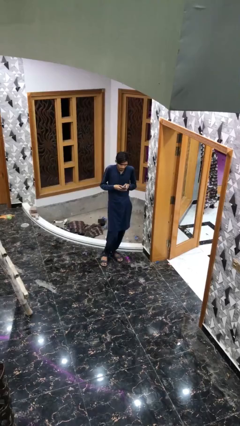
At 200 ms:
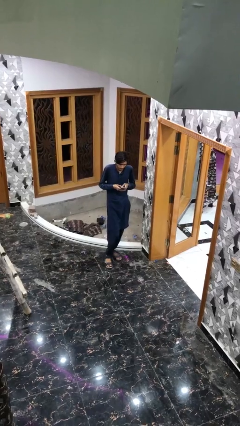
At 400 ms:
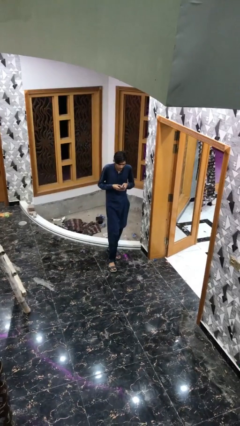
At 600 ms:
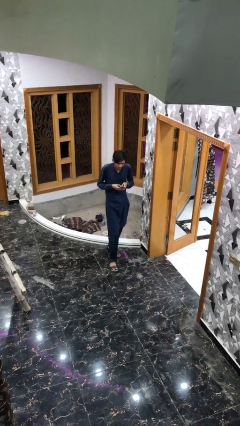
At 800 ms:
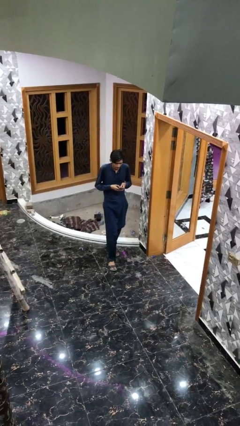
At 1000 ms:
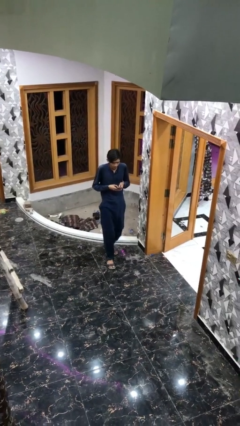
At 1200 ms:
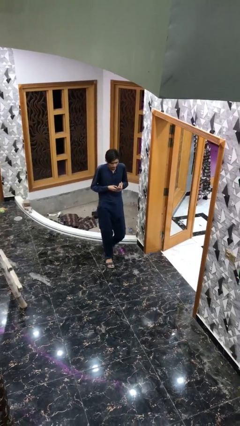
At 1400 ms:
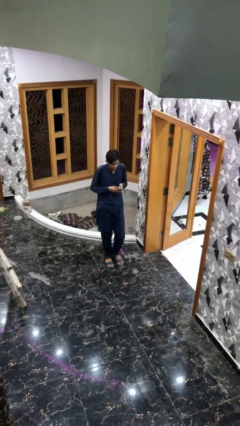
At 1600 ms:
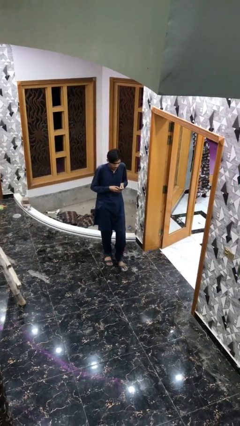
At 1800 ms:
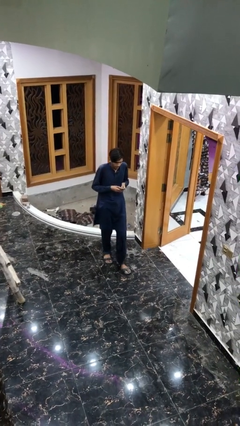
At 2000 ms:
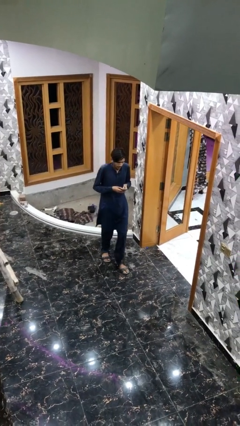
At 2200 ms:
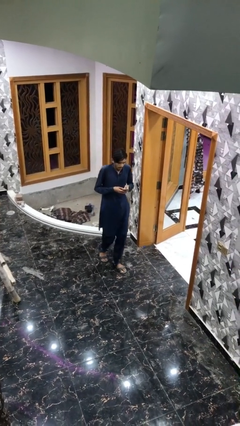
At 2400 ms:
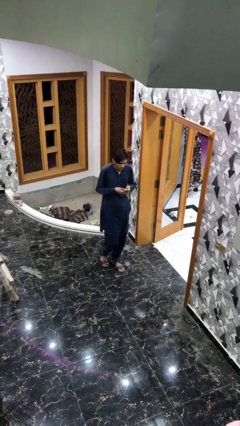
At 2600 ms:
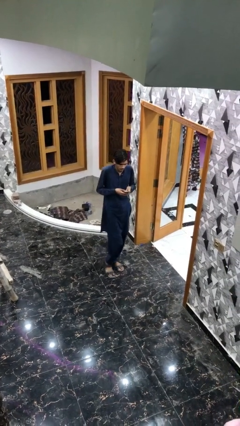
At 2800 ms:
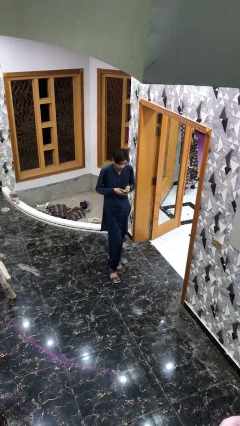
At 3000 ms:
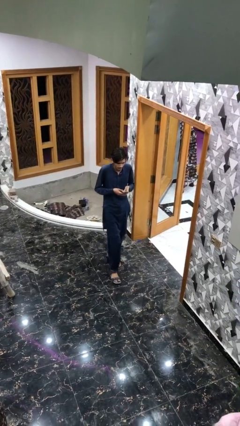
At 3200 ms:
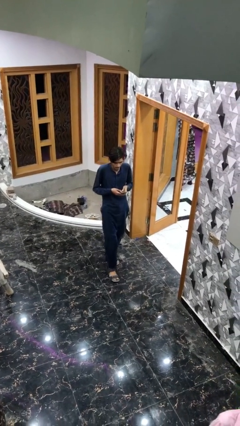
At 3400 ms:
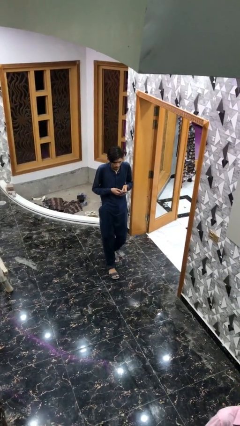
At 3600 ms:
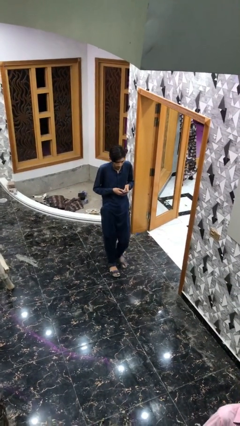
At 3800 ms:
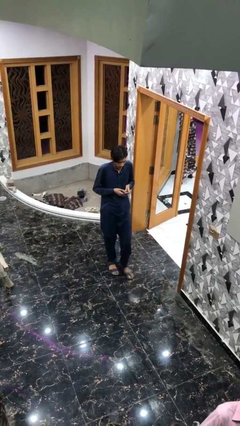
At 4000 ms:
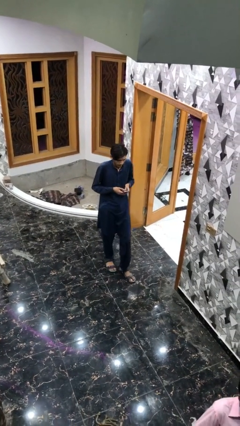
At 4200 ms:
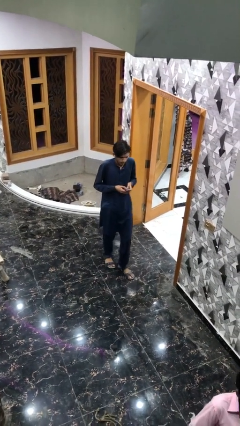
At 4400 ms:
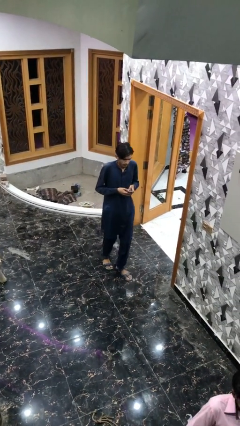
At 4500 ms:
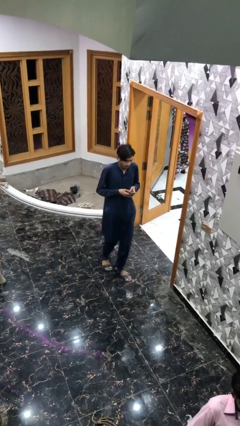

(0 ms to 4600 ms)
person texts on phone

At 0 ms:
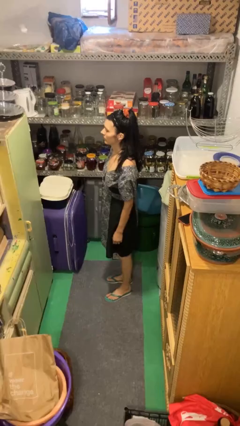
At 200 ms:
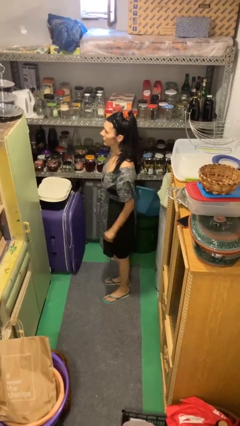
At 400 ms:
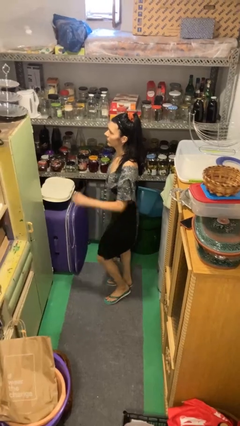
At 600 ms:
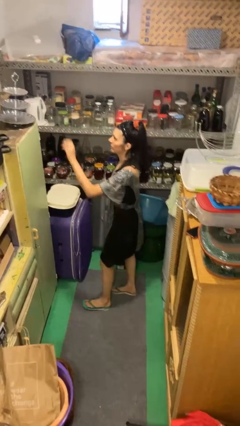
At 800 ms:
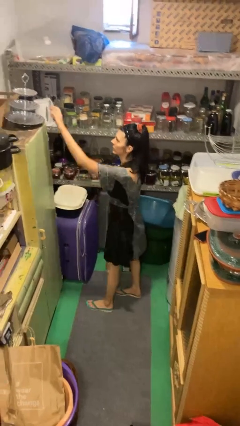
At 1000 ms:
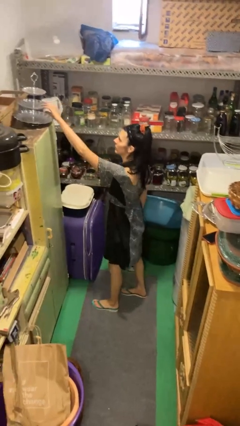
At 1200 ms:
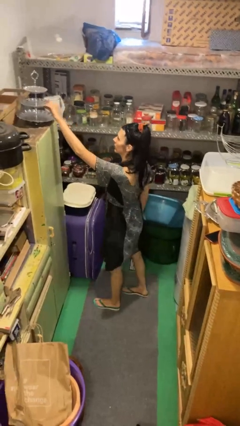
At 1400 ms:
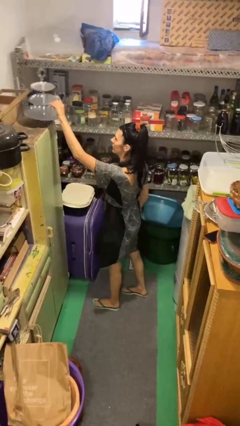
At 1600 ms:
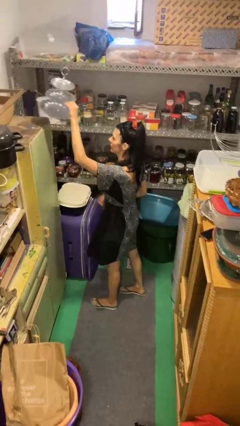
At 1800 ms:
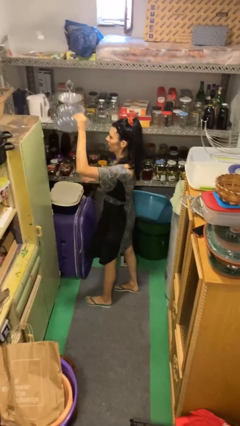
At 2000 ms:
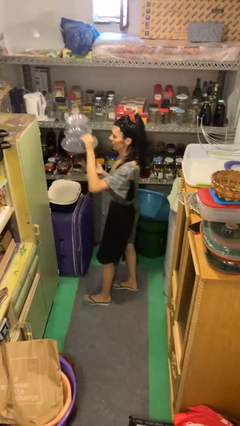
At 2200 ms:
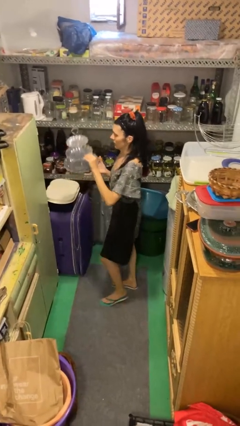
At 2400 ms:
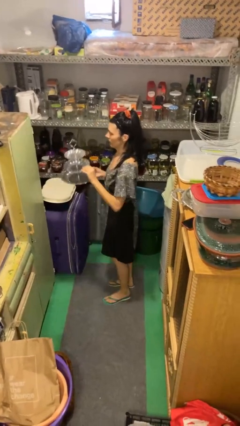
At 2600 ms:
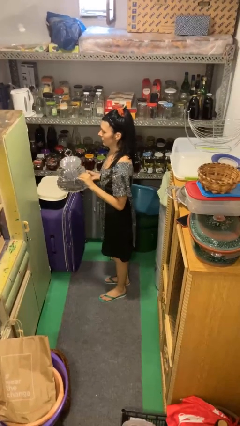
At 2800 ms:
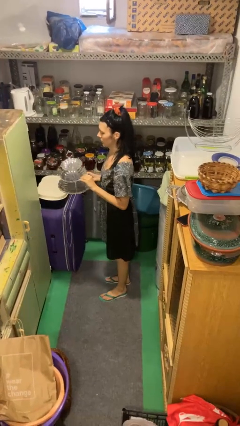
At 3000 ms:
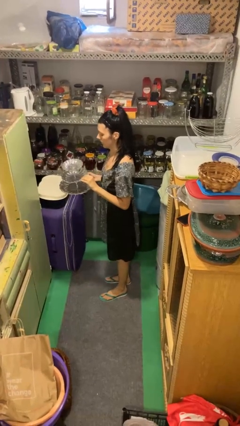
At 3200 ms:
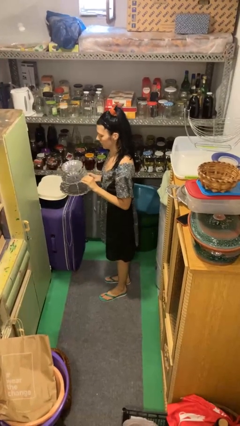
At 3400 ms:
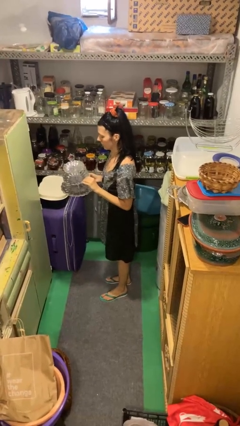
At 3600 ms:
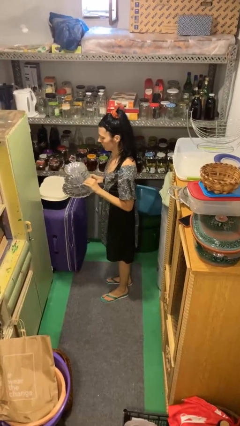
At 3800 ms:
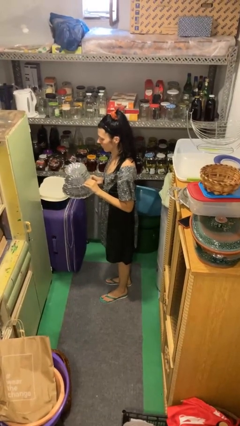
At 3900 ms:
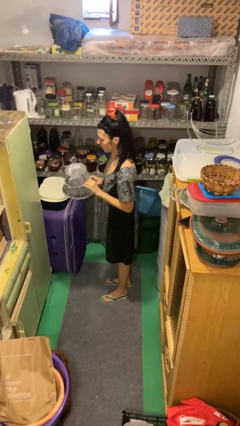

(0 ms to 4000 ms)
person picks up object from countertop

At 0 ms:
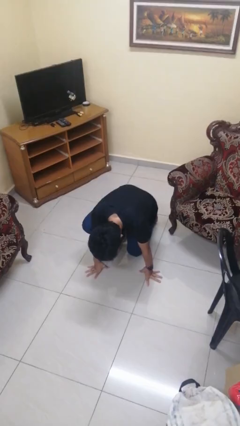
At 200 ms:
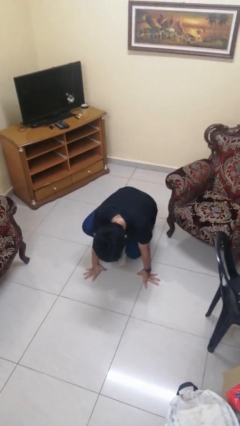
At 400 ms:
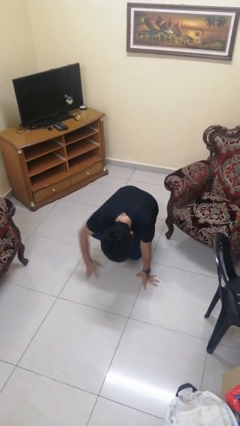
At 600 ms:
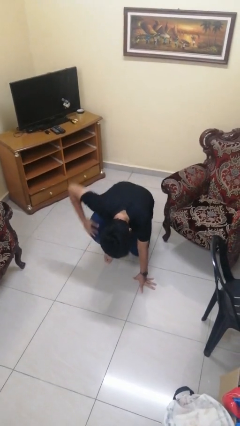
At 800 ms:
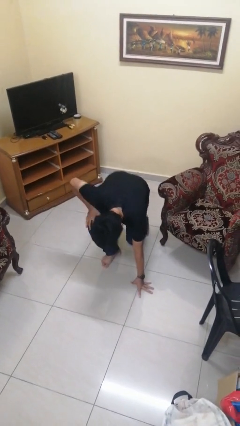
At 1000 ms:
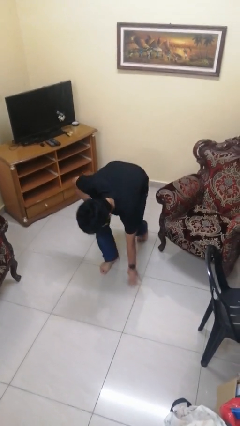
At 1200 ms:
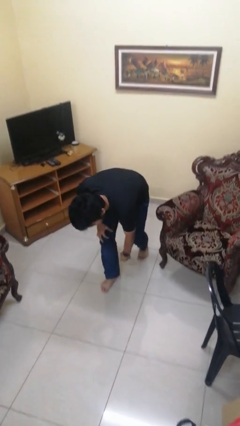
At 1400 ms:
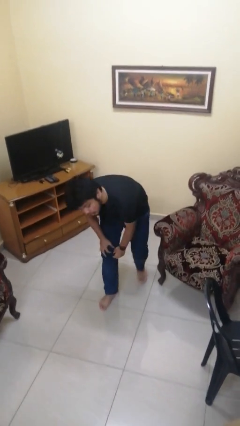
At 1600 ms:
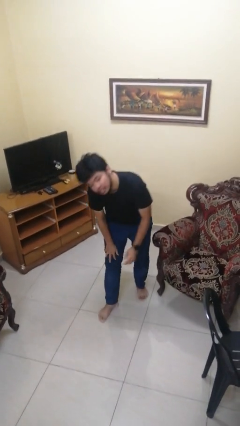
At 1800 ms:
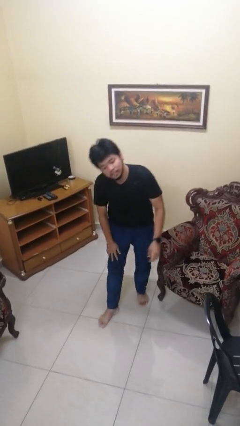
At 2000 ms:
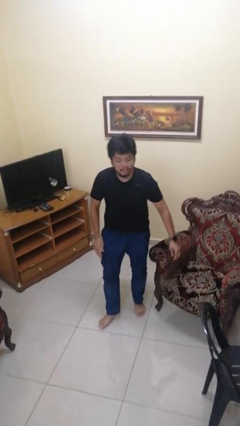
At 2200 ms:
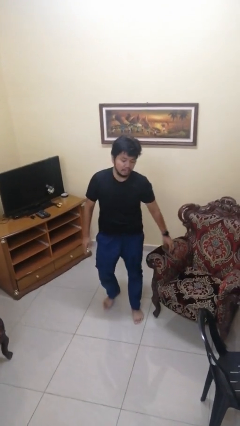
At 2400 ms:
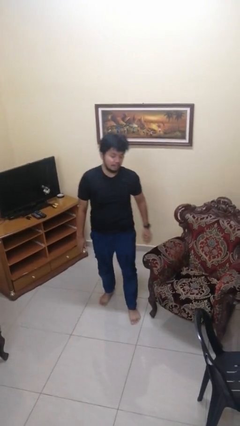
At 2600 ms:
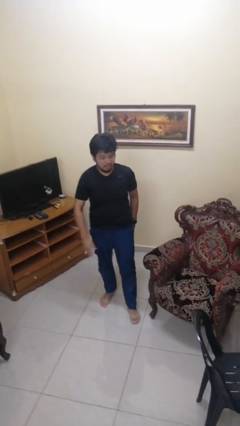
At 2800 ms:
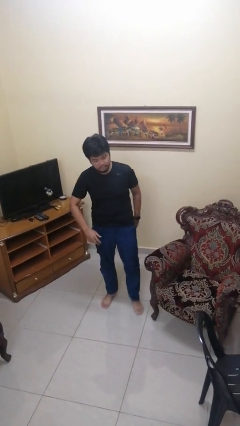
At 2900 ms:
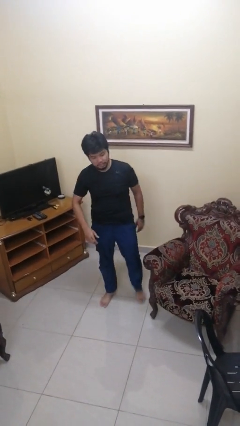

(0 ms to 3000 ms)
person stands up from floor

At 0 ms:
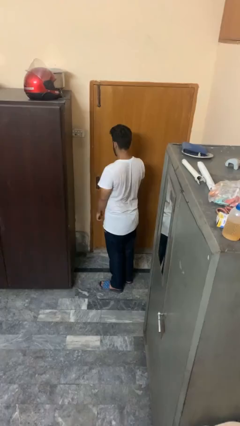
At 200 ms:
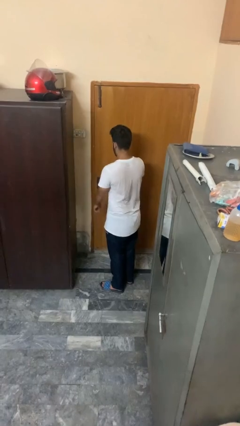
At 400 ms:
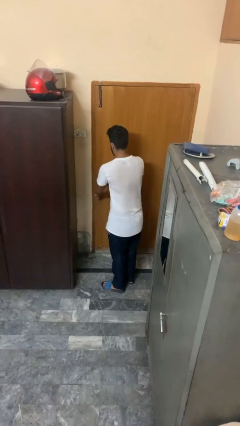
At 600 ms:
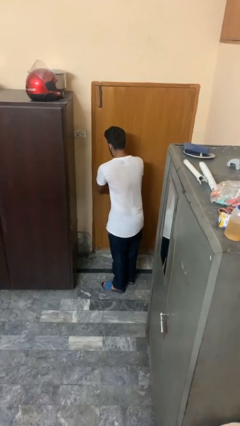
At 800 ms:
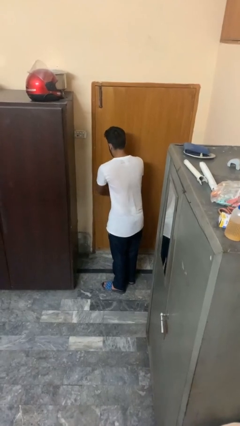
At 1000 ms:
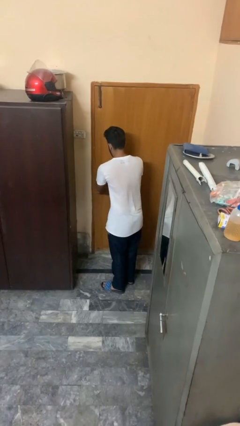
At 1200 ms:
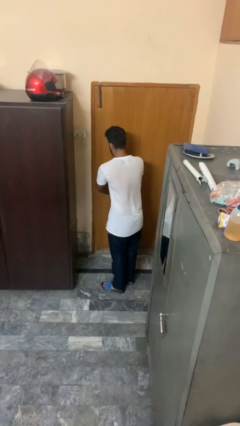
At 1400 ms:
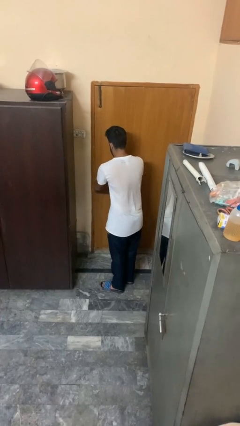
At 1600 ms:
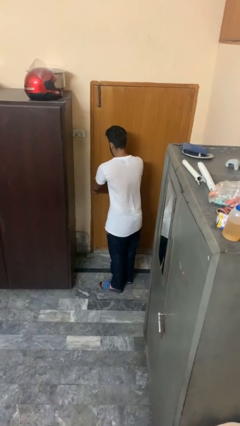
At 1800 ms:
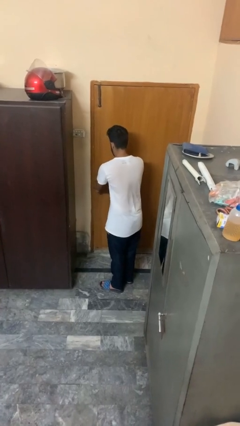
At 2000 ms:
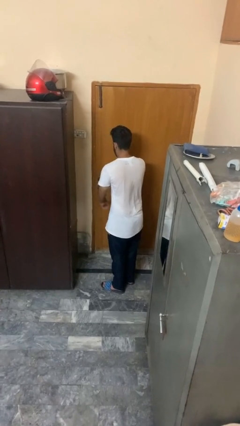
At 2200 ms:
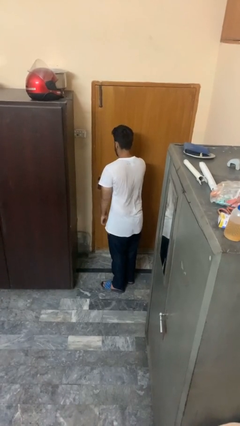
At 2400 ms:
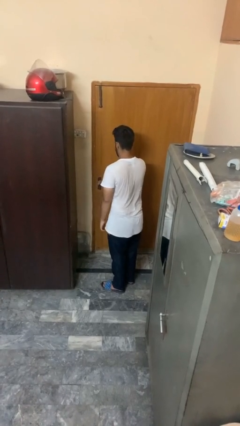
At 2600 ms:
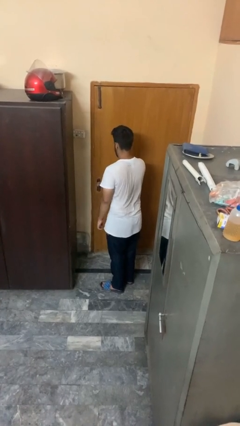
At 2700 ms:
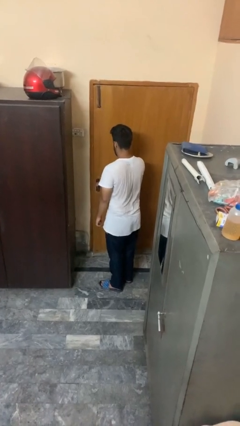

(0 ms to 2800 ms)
person unlocks door with keys

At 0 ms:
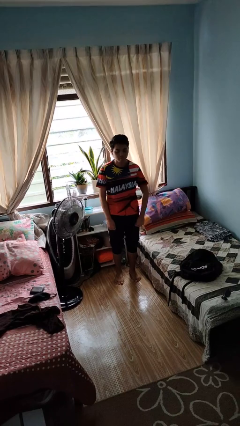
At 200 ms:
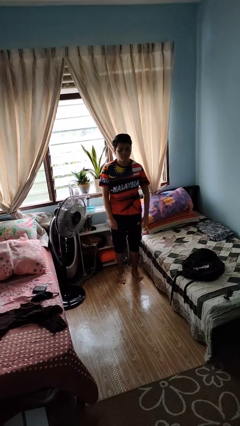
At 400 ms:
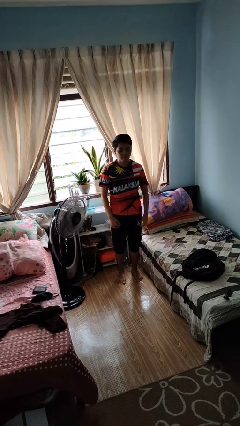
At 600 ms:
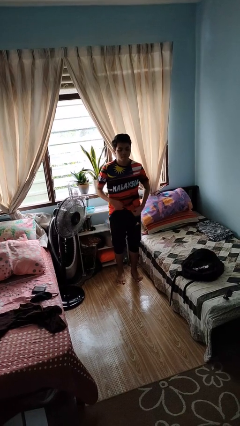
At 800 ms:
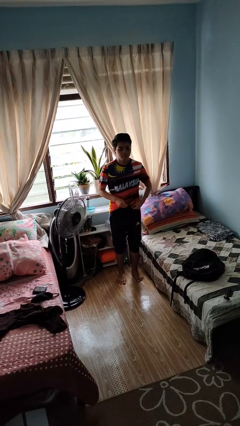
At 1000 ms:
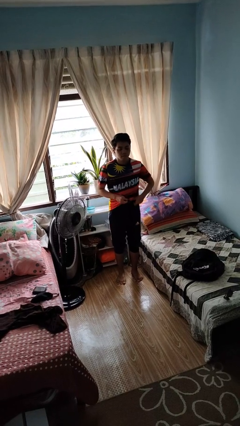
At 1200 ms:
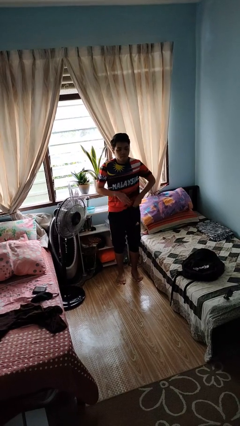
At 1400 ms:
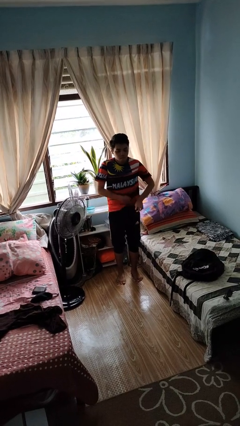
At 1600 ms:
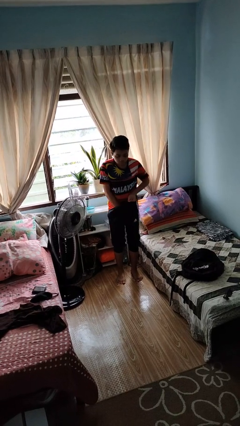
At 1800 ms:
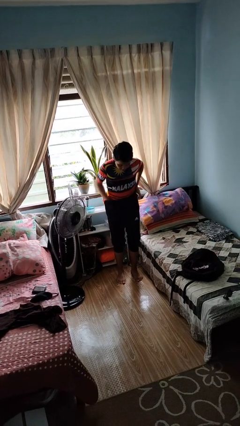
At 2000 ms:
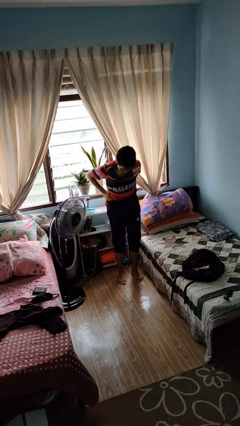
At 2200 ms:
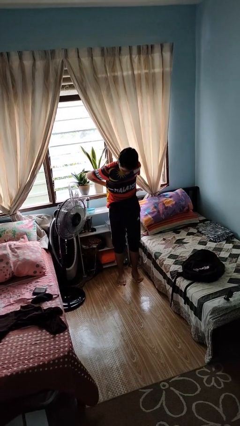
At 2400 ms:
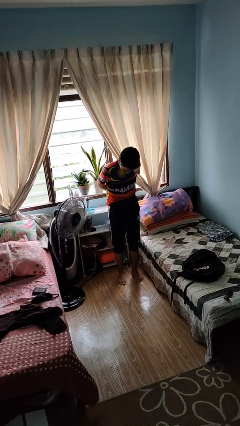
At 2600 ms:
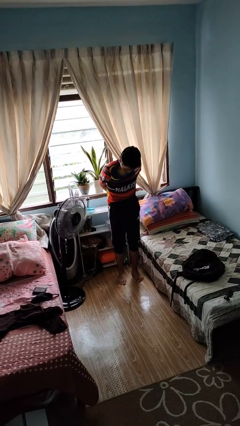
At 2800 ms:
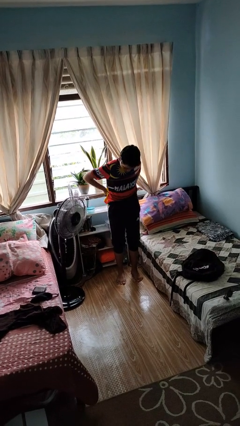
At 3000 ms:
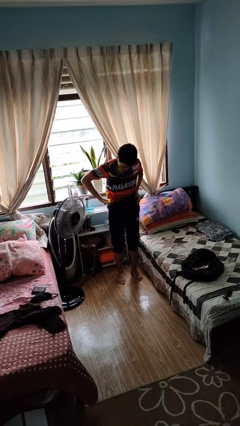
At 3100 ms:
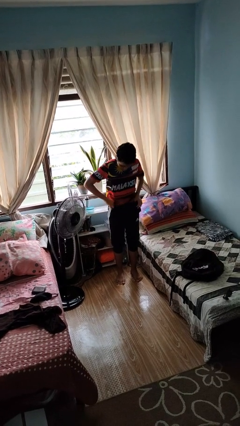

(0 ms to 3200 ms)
person tucks in shirt

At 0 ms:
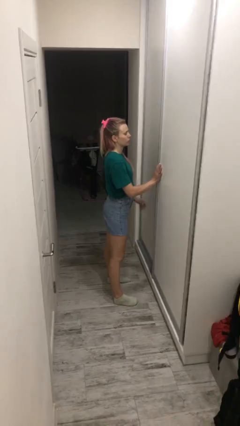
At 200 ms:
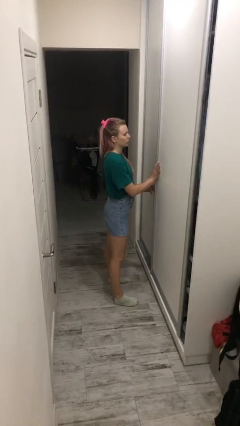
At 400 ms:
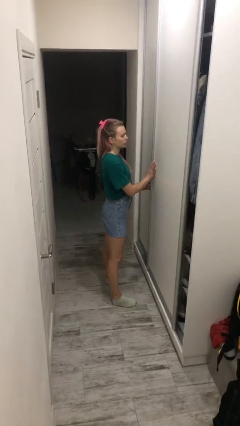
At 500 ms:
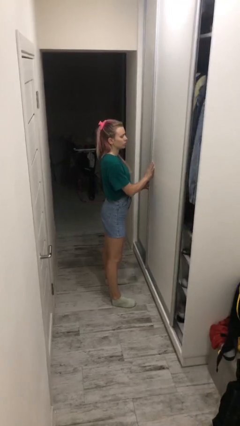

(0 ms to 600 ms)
person opens sliding door
